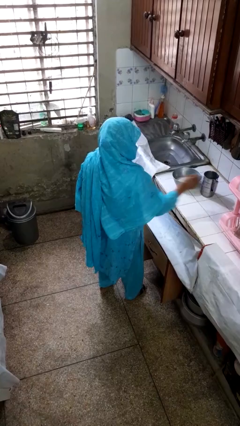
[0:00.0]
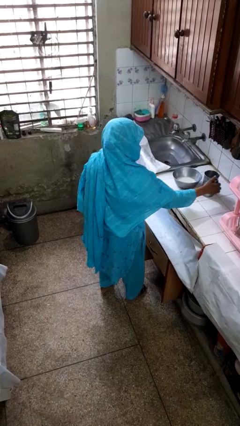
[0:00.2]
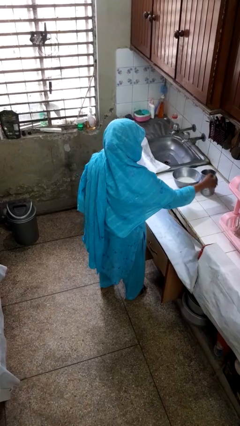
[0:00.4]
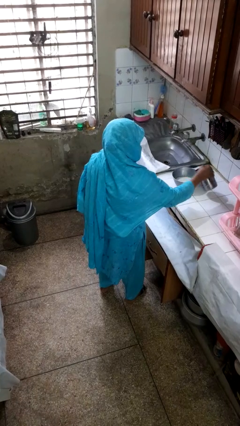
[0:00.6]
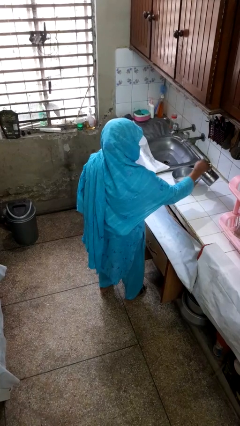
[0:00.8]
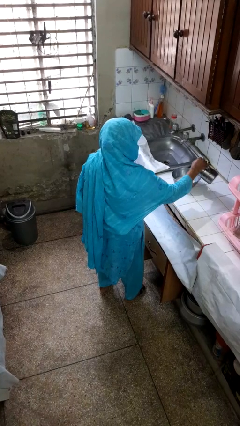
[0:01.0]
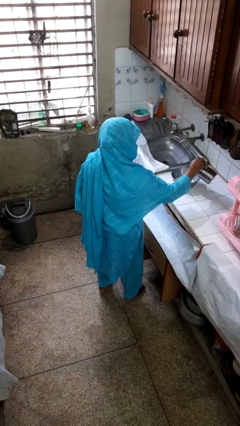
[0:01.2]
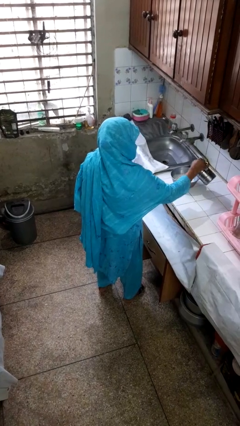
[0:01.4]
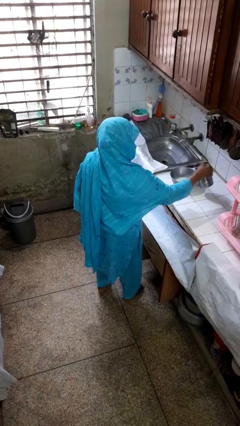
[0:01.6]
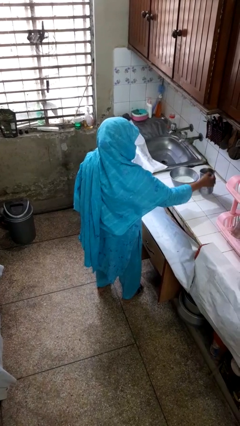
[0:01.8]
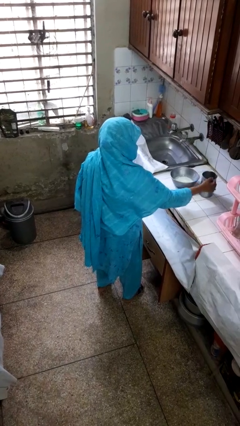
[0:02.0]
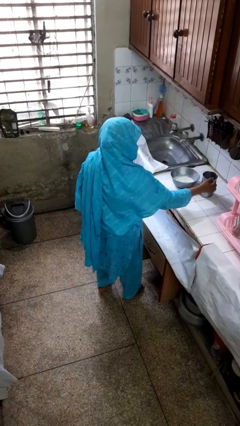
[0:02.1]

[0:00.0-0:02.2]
person pours into bowl

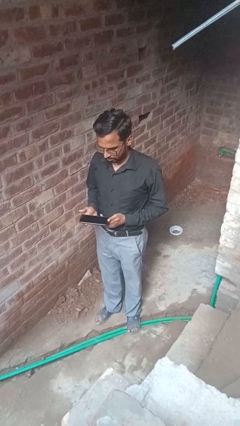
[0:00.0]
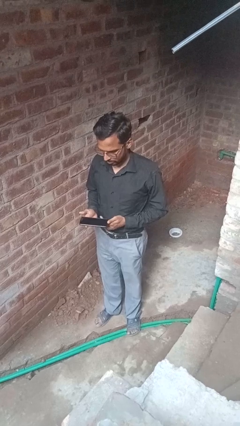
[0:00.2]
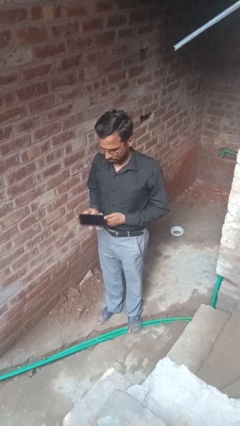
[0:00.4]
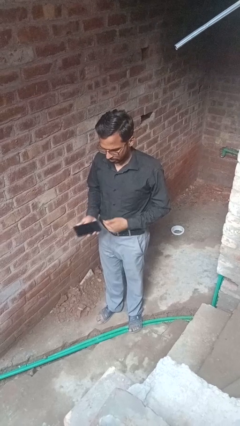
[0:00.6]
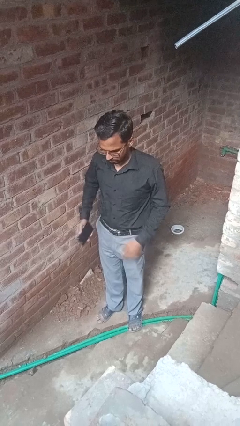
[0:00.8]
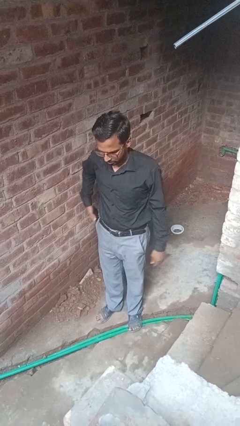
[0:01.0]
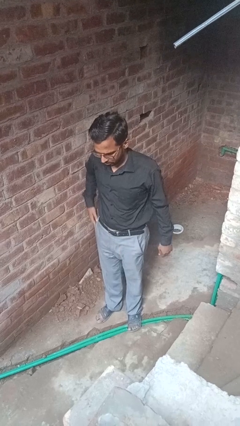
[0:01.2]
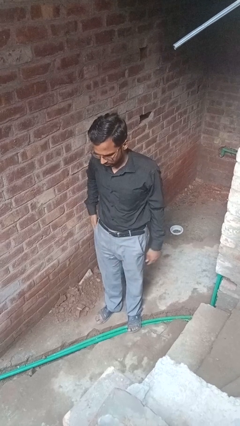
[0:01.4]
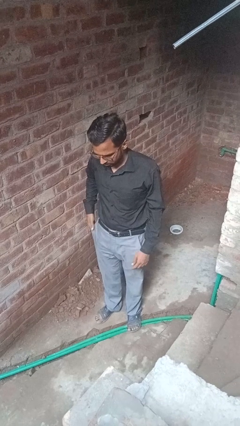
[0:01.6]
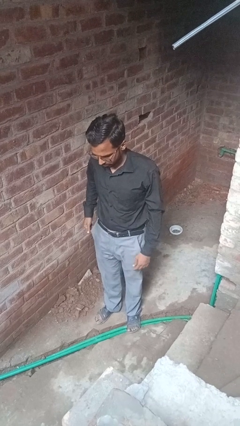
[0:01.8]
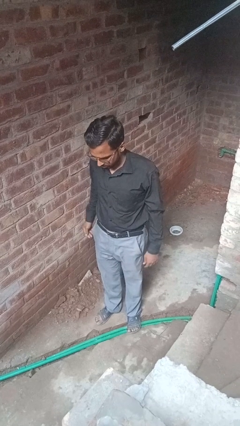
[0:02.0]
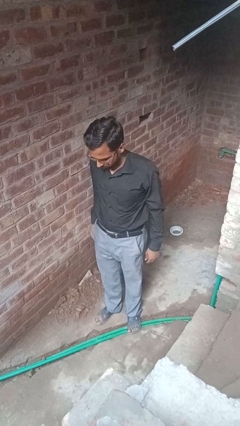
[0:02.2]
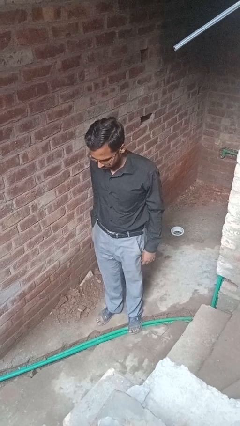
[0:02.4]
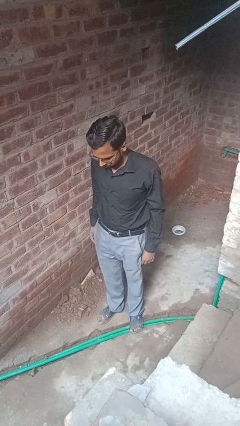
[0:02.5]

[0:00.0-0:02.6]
person puts phone into pocket

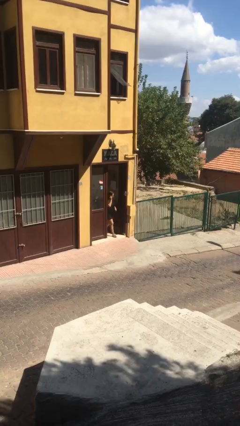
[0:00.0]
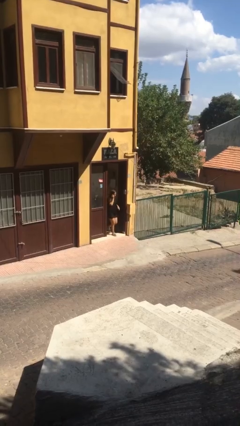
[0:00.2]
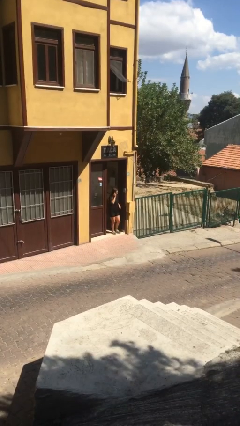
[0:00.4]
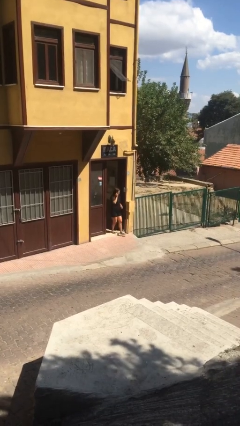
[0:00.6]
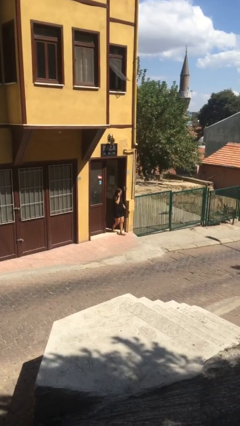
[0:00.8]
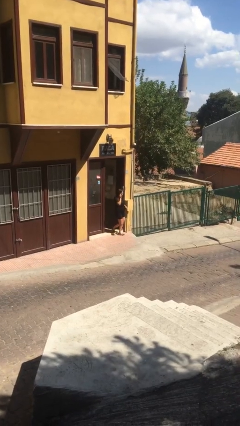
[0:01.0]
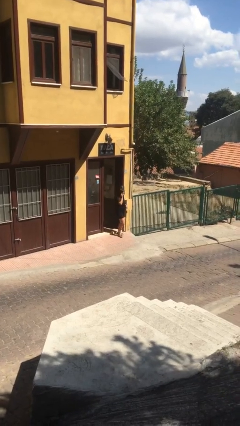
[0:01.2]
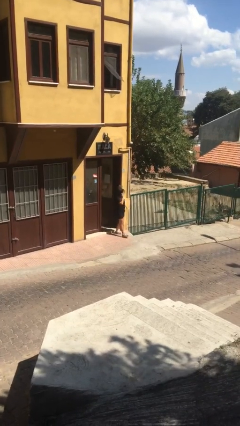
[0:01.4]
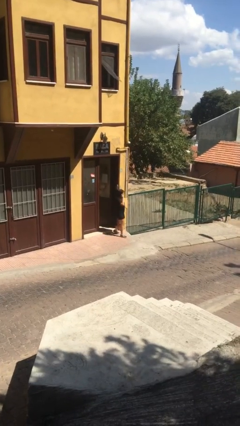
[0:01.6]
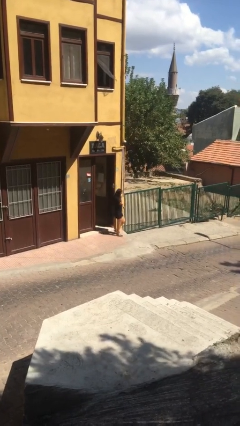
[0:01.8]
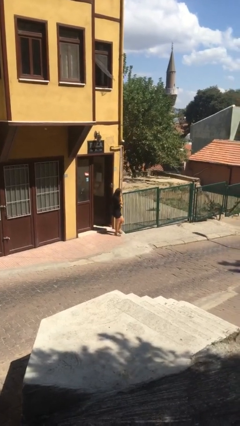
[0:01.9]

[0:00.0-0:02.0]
person enters scene through structure

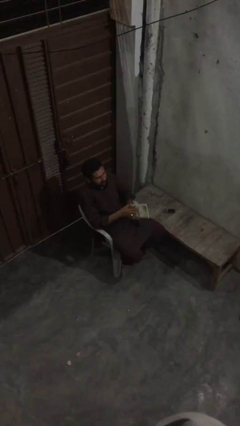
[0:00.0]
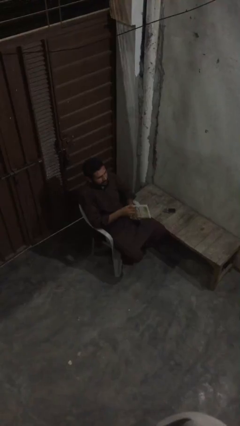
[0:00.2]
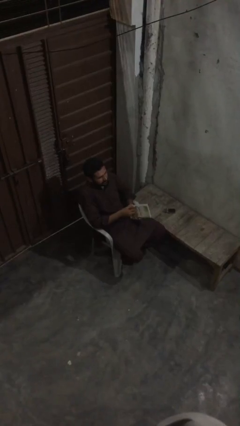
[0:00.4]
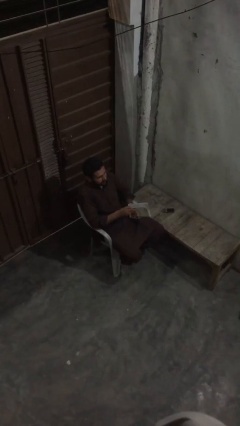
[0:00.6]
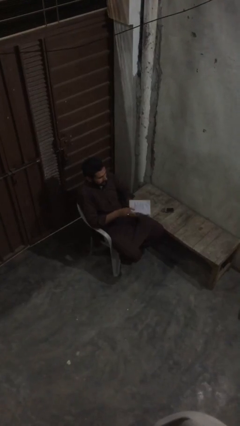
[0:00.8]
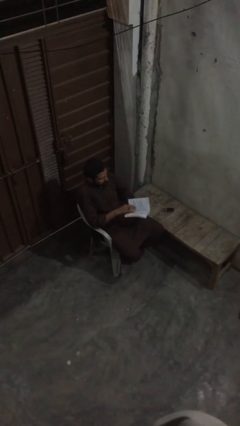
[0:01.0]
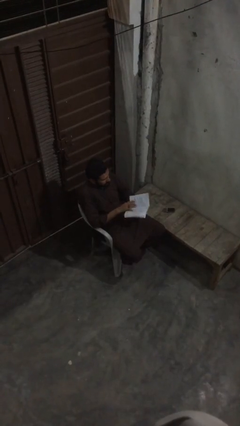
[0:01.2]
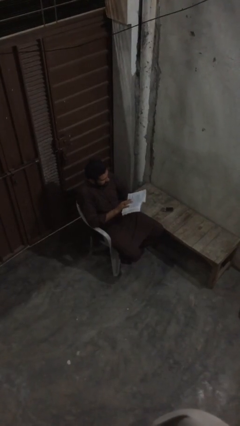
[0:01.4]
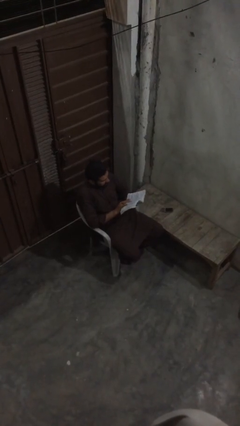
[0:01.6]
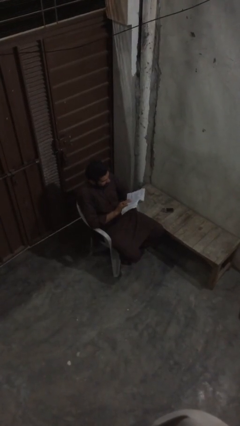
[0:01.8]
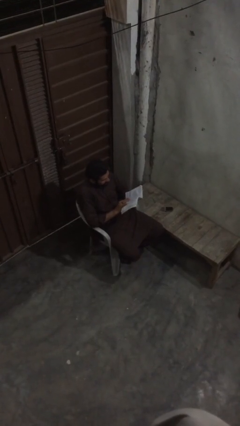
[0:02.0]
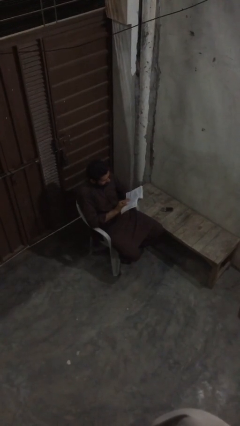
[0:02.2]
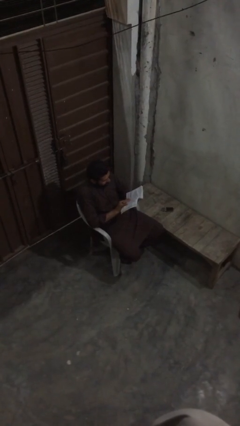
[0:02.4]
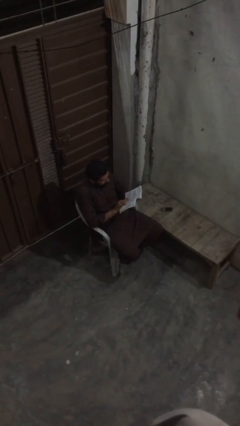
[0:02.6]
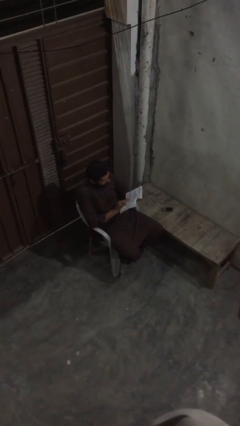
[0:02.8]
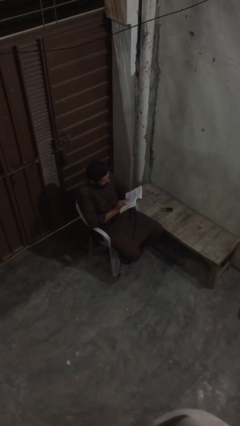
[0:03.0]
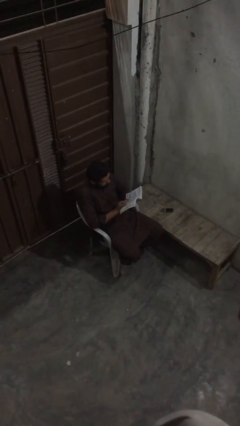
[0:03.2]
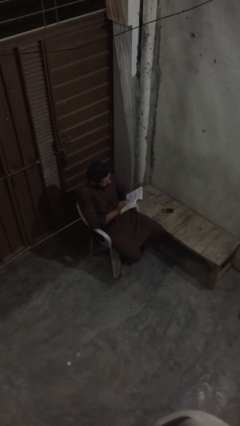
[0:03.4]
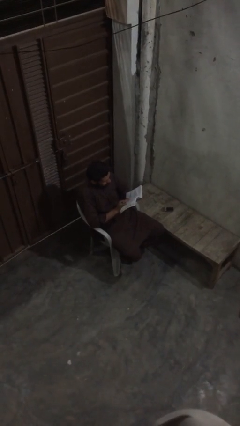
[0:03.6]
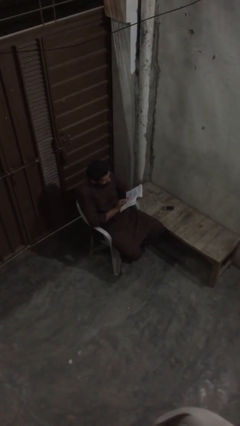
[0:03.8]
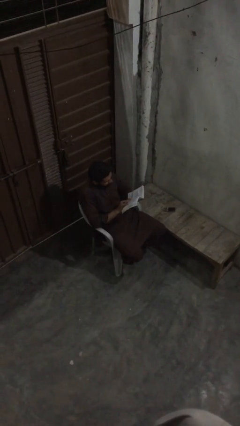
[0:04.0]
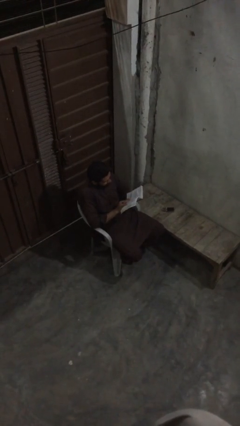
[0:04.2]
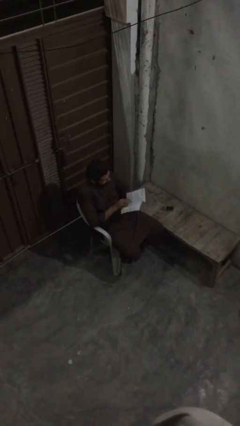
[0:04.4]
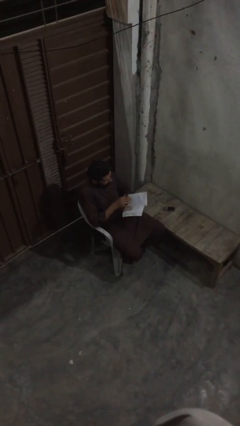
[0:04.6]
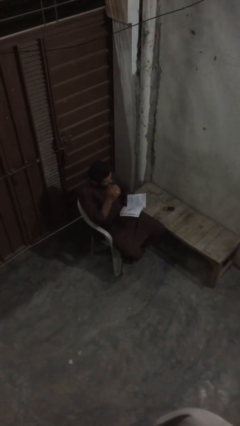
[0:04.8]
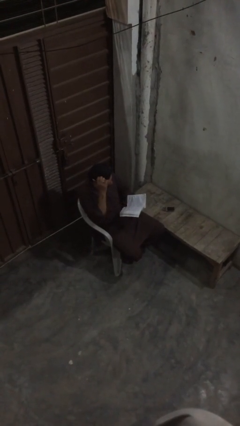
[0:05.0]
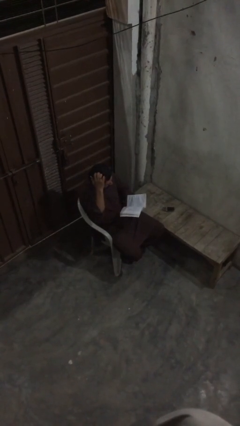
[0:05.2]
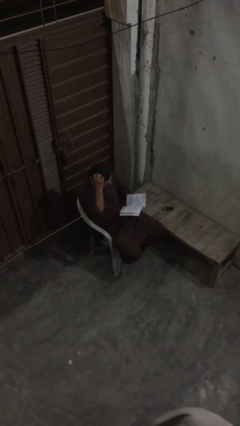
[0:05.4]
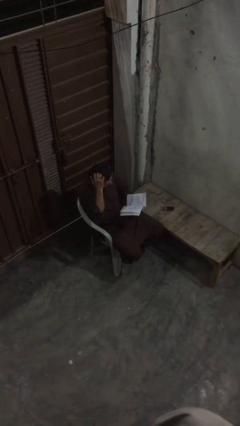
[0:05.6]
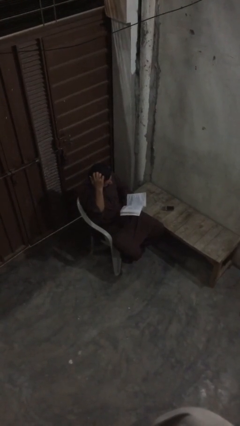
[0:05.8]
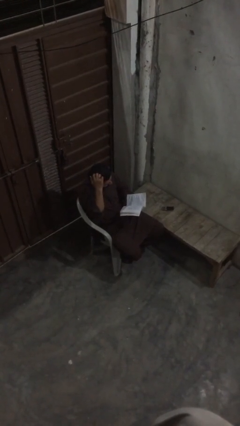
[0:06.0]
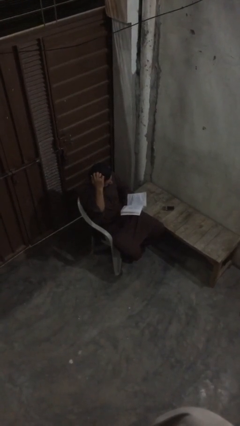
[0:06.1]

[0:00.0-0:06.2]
person reads document

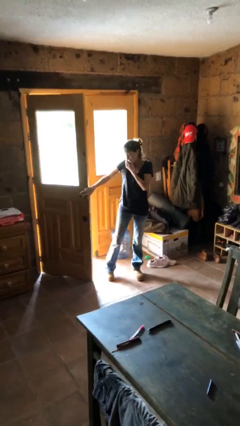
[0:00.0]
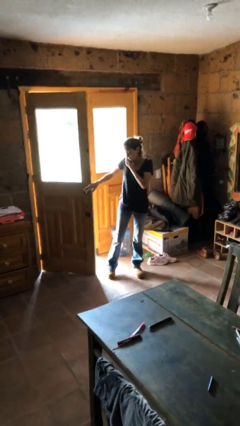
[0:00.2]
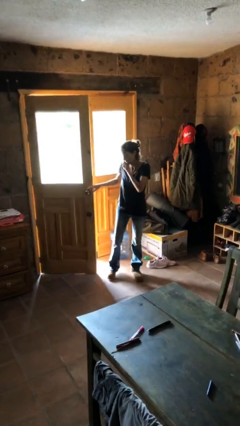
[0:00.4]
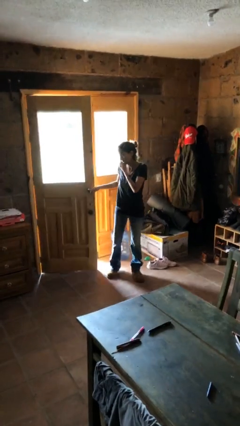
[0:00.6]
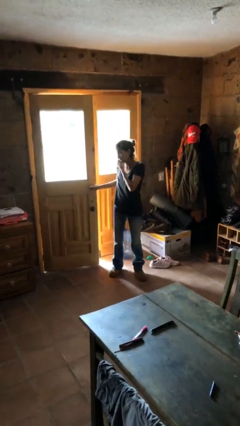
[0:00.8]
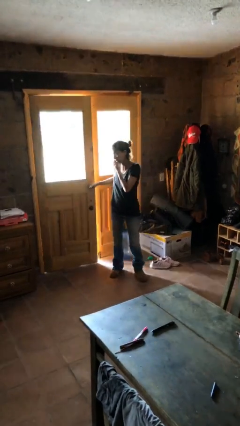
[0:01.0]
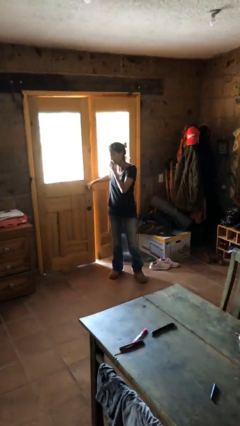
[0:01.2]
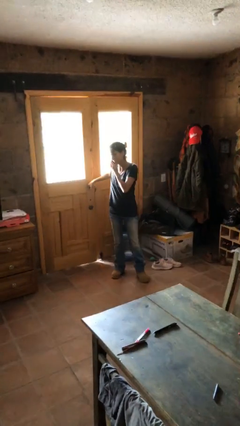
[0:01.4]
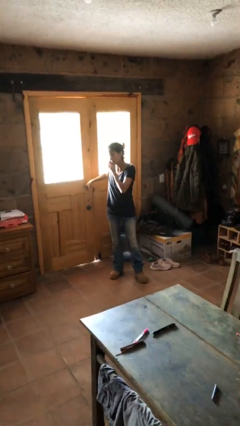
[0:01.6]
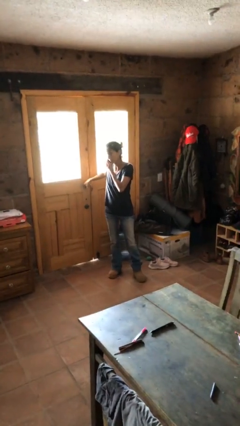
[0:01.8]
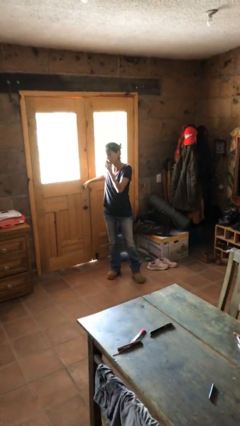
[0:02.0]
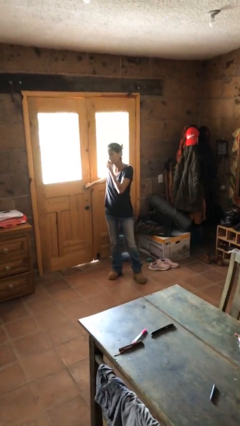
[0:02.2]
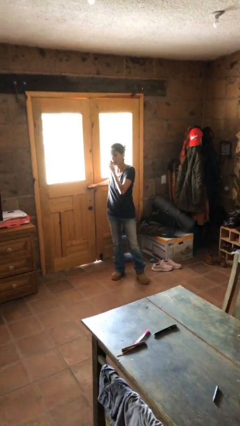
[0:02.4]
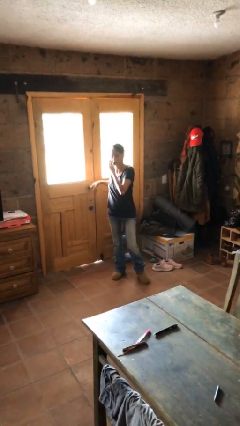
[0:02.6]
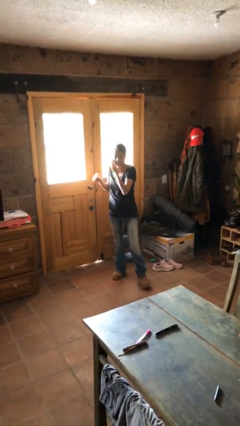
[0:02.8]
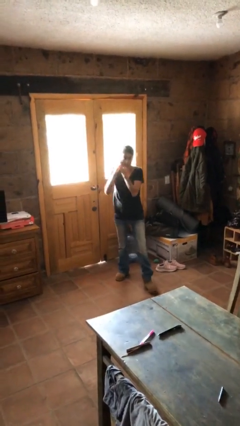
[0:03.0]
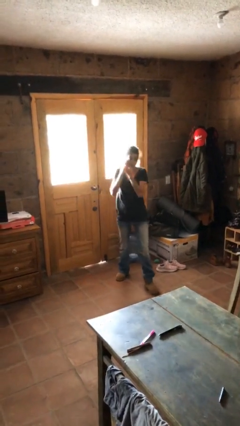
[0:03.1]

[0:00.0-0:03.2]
person closes facility door

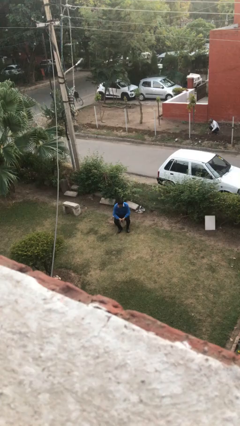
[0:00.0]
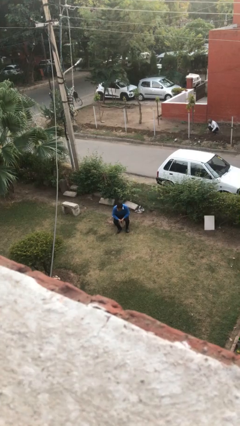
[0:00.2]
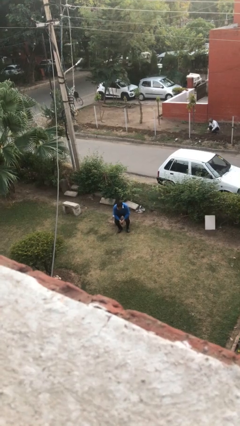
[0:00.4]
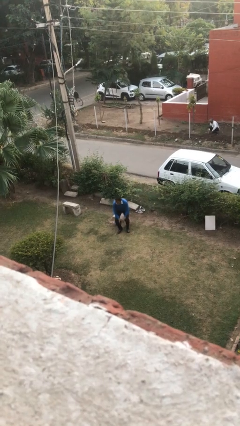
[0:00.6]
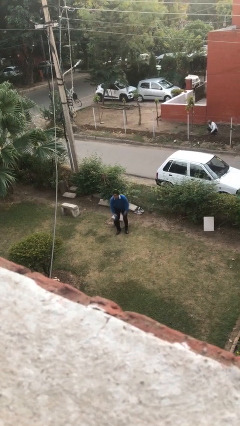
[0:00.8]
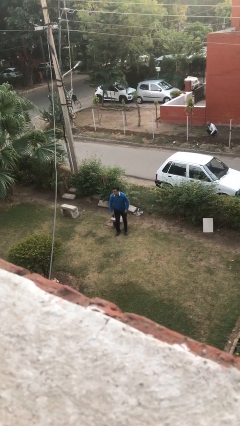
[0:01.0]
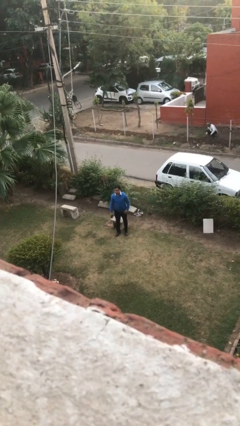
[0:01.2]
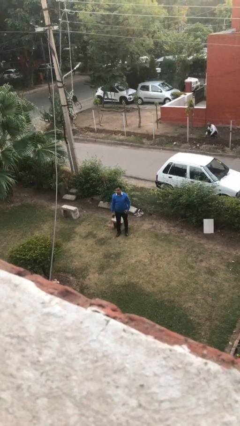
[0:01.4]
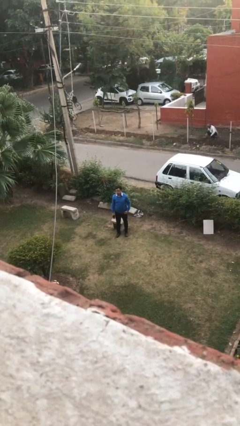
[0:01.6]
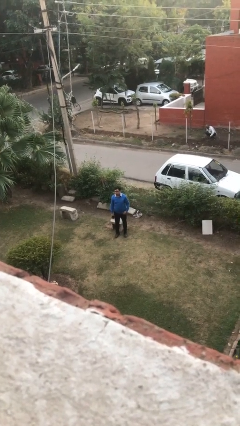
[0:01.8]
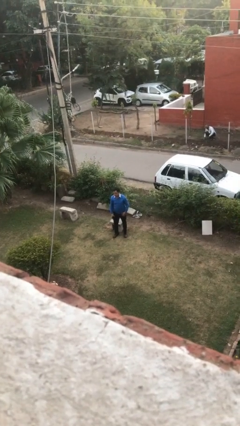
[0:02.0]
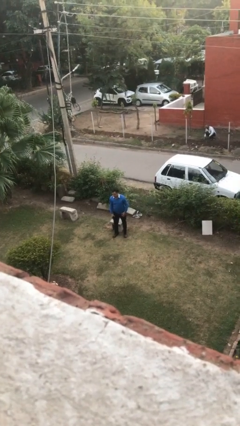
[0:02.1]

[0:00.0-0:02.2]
person stands up
